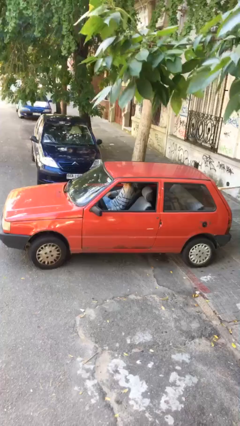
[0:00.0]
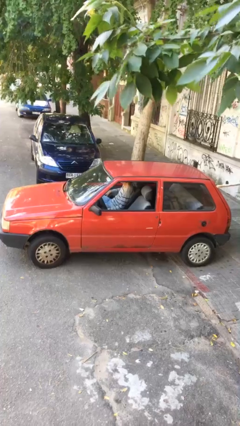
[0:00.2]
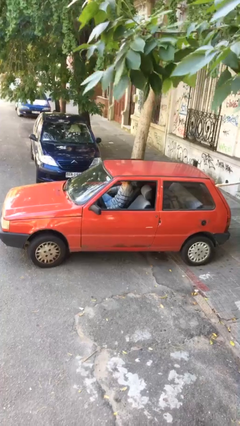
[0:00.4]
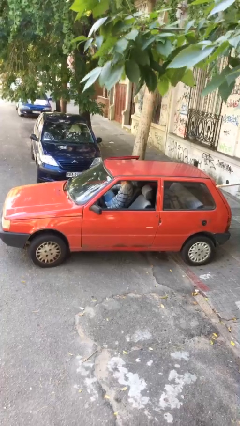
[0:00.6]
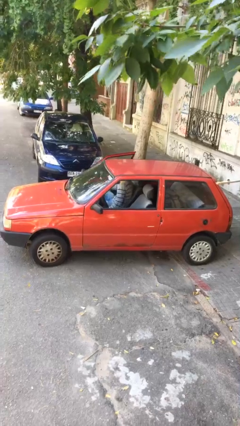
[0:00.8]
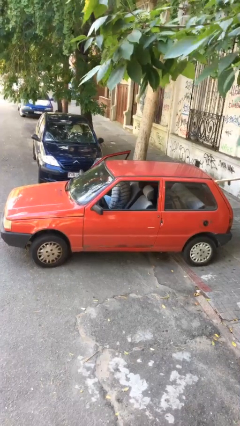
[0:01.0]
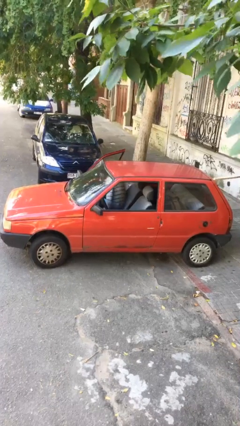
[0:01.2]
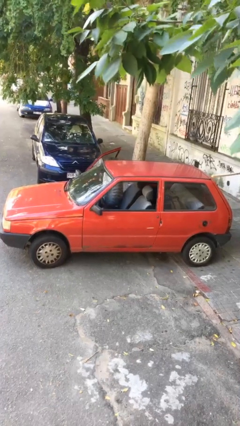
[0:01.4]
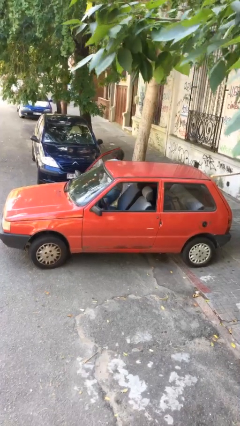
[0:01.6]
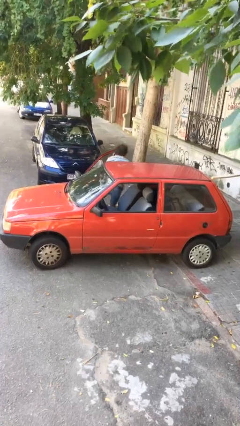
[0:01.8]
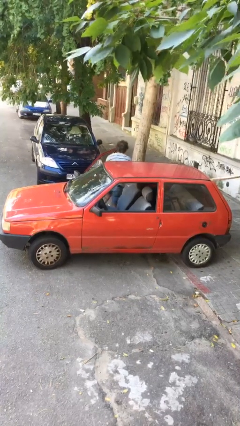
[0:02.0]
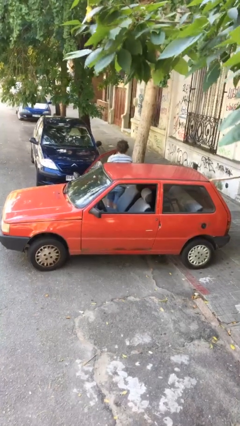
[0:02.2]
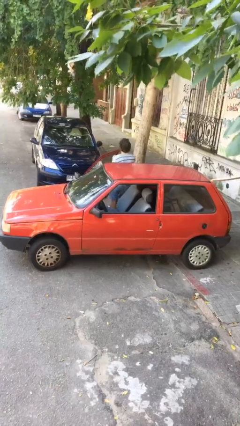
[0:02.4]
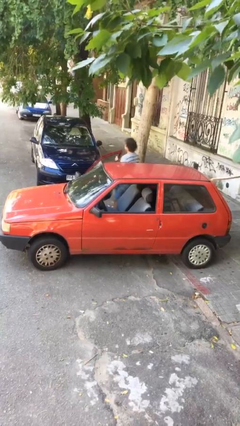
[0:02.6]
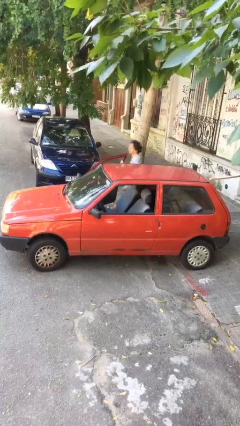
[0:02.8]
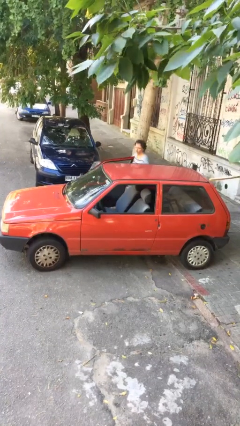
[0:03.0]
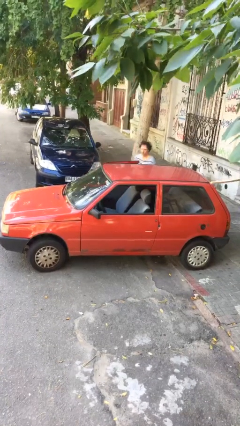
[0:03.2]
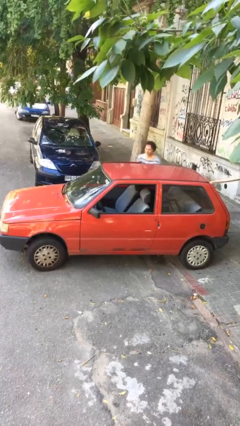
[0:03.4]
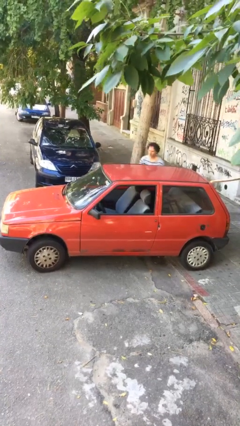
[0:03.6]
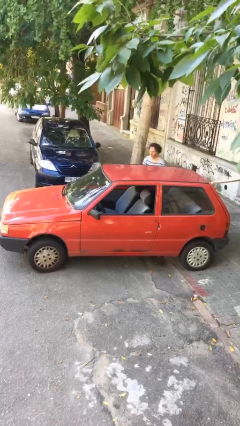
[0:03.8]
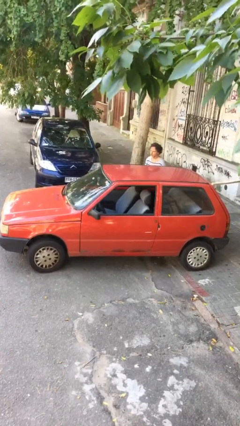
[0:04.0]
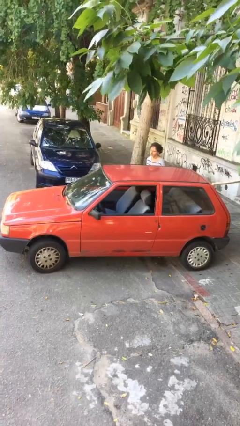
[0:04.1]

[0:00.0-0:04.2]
car drops off person

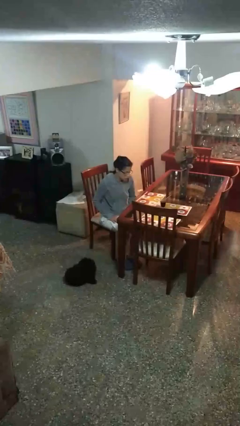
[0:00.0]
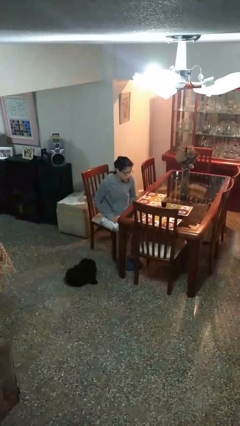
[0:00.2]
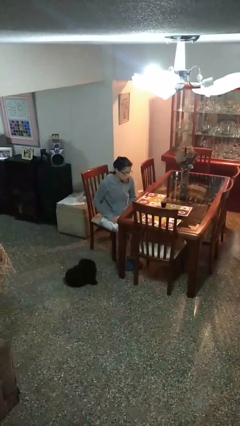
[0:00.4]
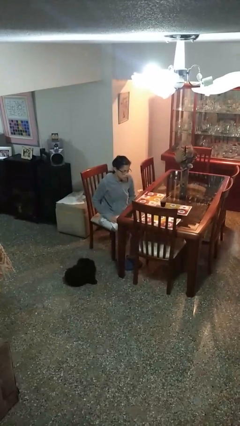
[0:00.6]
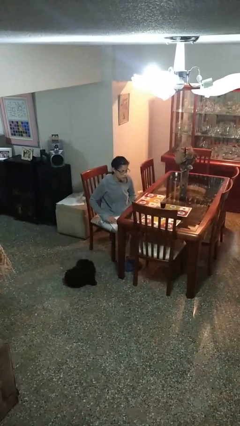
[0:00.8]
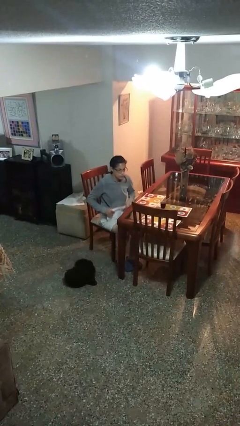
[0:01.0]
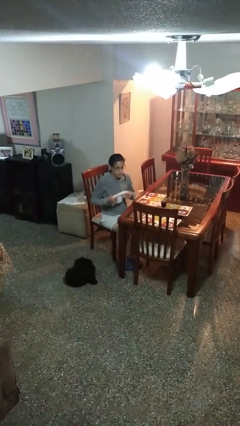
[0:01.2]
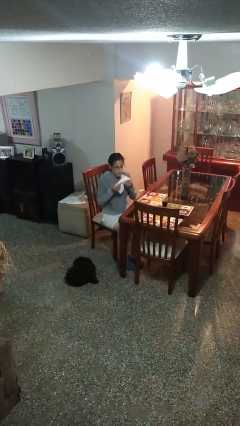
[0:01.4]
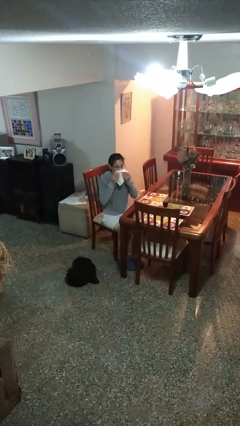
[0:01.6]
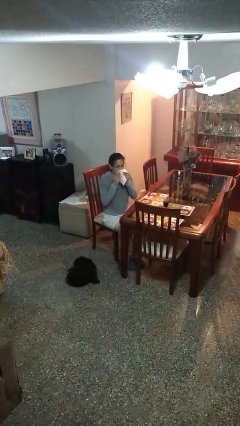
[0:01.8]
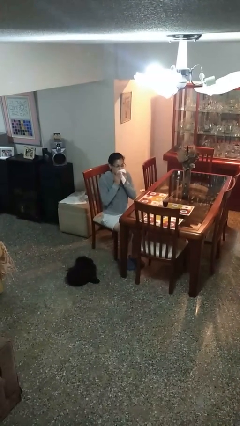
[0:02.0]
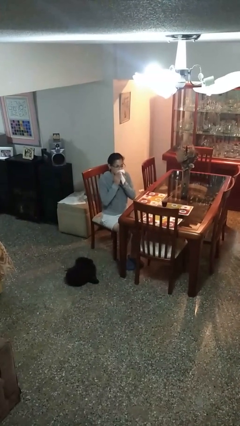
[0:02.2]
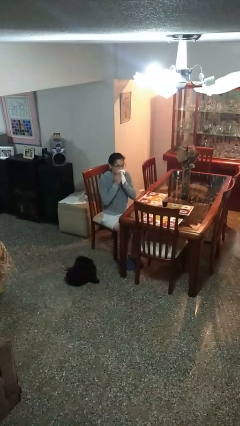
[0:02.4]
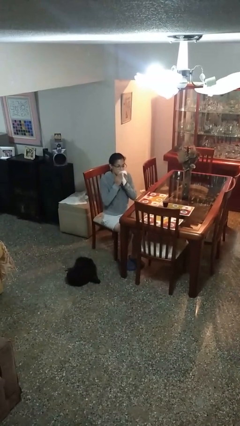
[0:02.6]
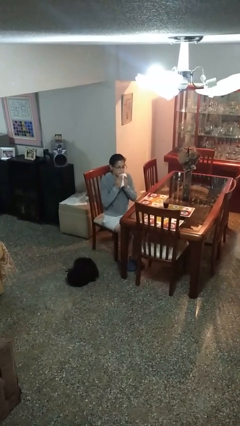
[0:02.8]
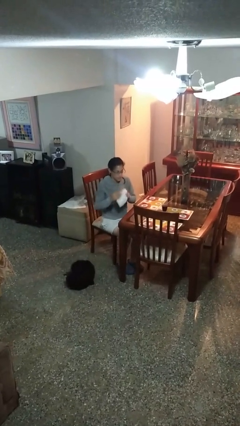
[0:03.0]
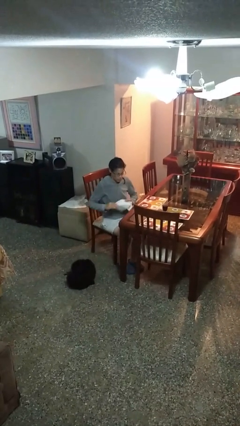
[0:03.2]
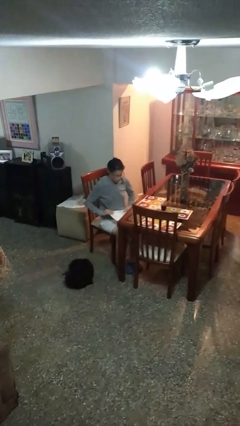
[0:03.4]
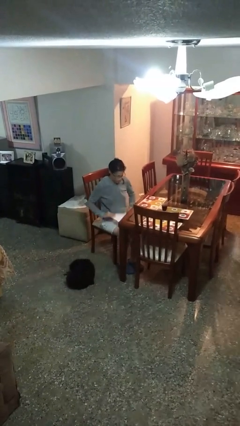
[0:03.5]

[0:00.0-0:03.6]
person wipes mouth with napkin

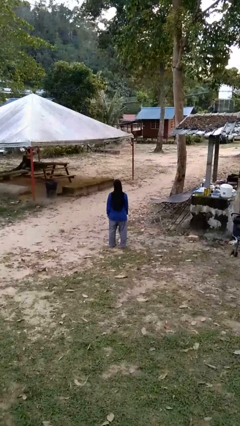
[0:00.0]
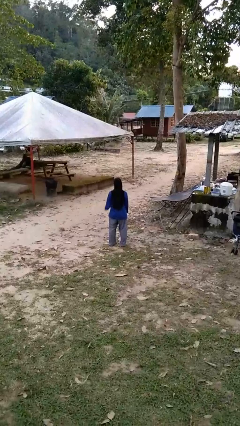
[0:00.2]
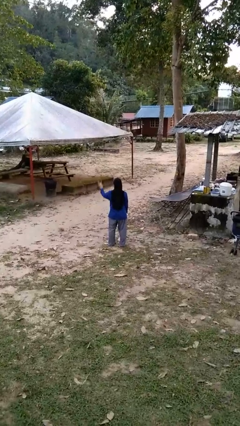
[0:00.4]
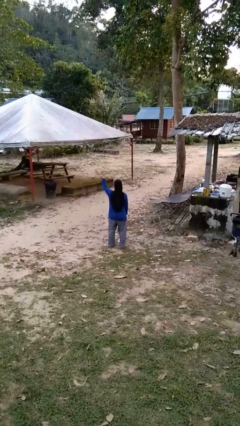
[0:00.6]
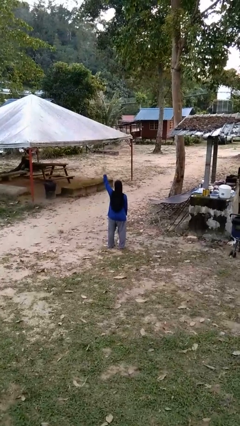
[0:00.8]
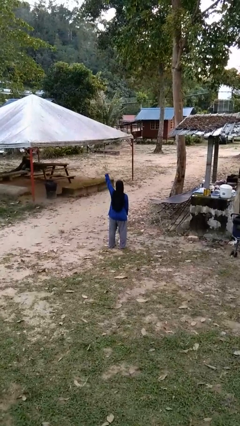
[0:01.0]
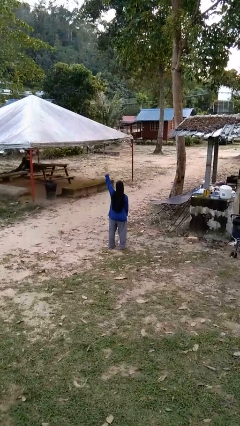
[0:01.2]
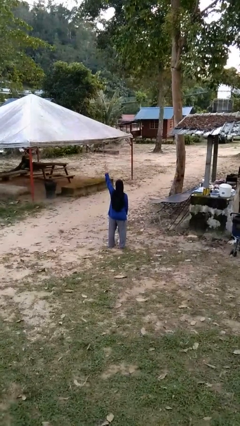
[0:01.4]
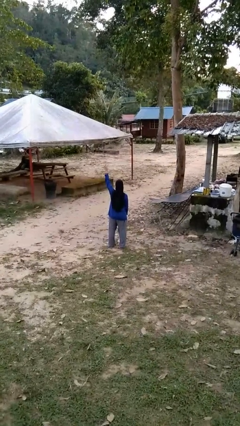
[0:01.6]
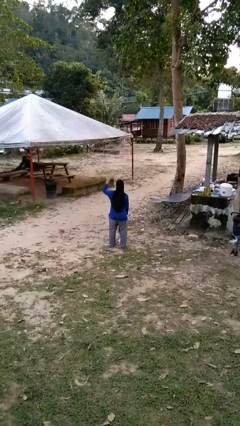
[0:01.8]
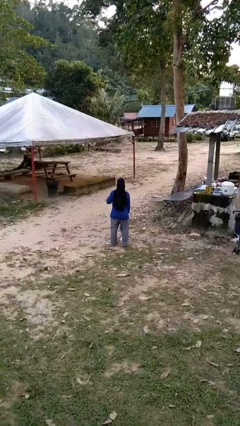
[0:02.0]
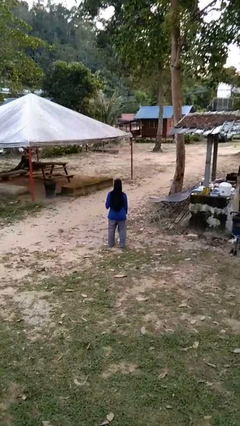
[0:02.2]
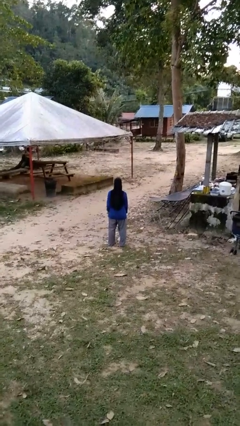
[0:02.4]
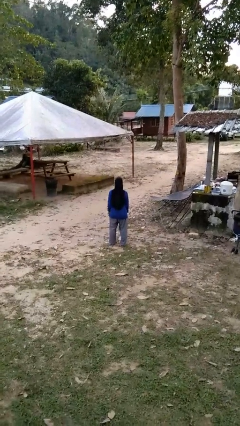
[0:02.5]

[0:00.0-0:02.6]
person gestures number four

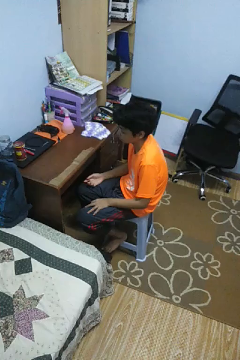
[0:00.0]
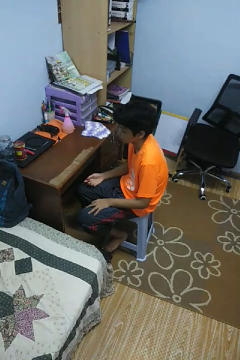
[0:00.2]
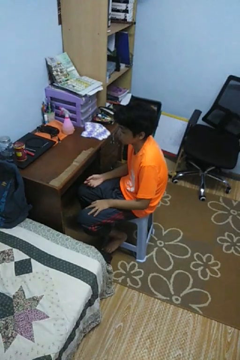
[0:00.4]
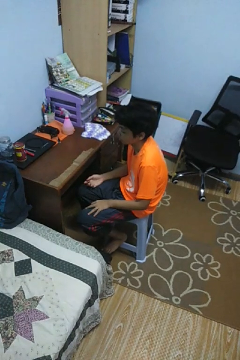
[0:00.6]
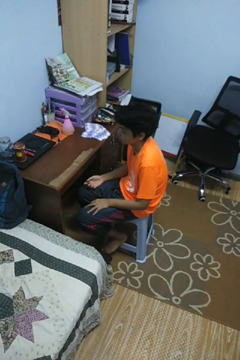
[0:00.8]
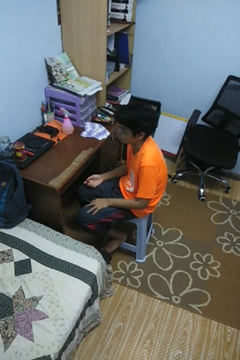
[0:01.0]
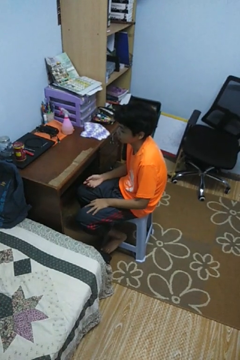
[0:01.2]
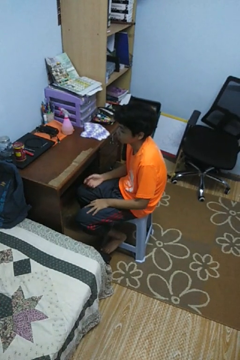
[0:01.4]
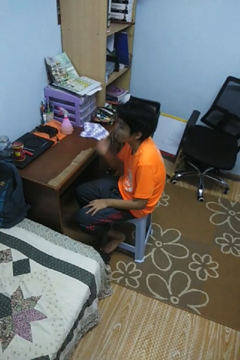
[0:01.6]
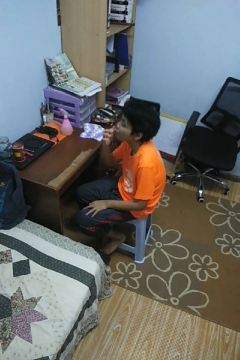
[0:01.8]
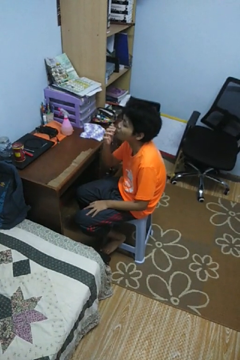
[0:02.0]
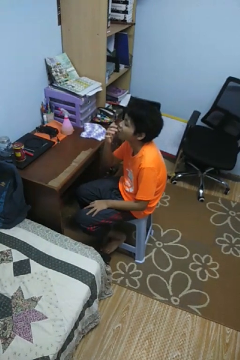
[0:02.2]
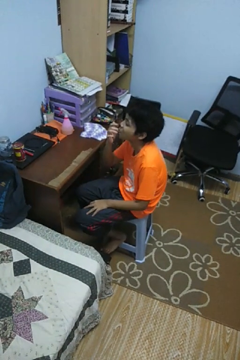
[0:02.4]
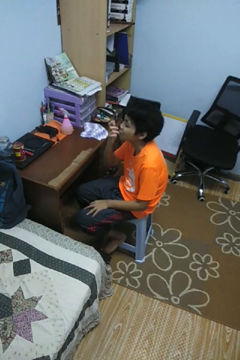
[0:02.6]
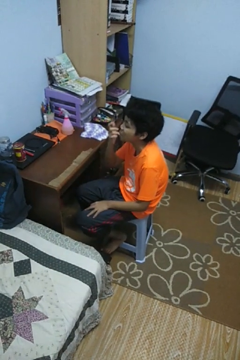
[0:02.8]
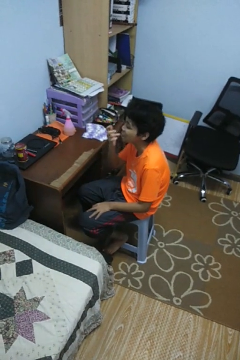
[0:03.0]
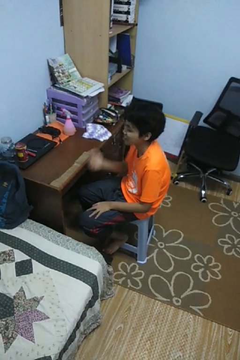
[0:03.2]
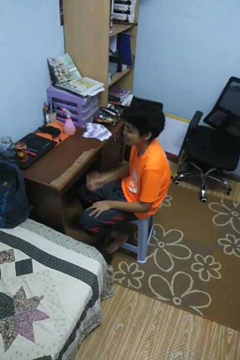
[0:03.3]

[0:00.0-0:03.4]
person licks fingers

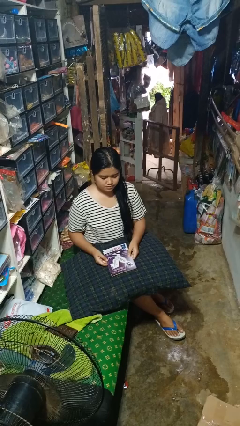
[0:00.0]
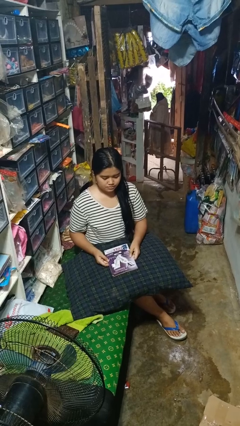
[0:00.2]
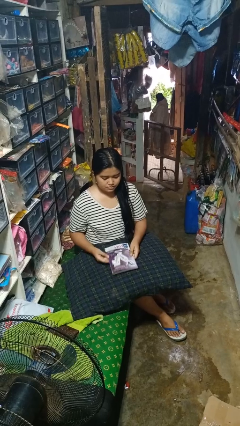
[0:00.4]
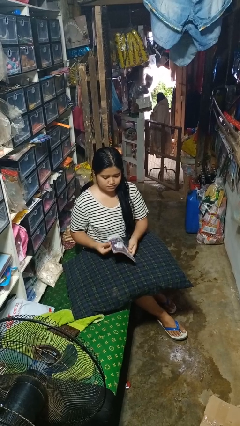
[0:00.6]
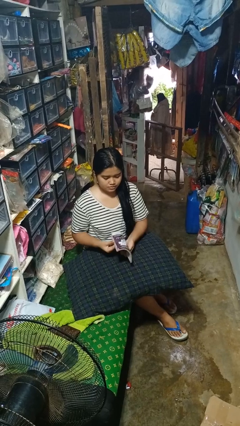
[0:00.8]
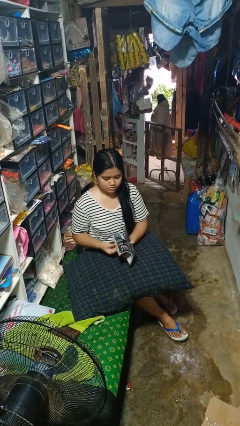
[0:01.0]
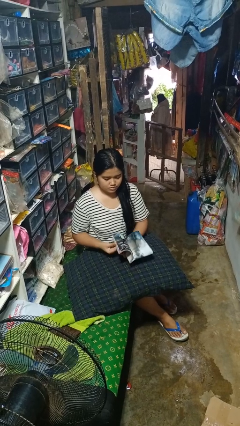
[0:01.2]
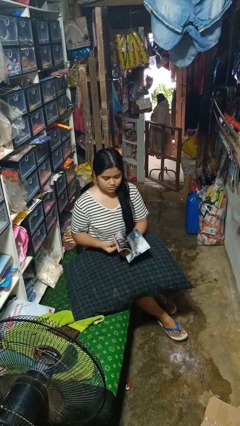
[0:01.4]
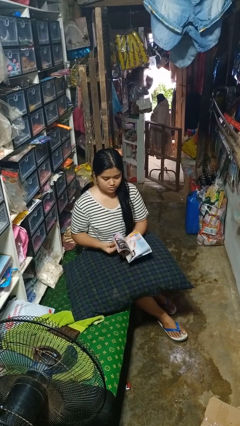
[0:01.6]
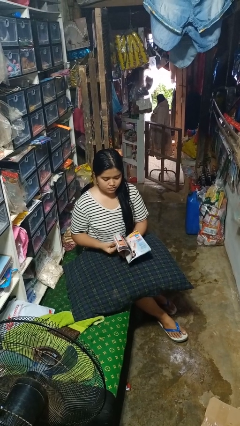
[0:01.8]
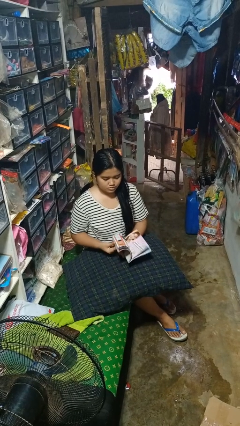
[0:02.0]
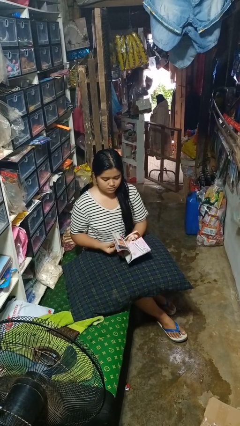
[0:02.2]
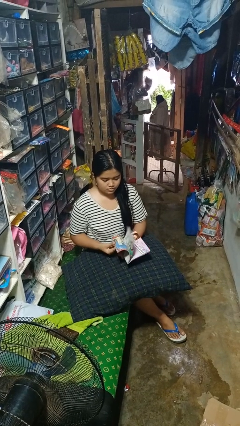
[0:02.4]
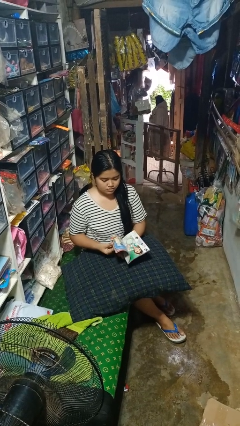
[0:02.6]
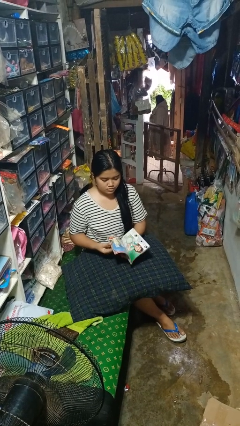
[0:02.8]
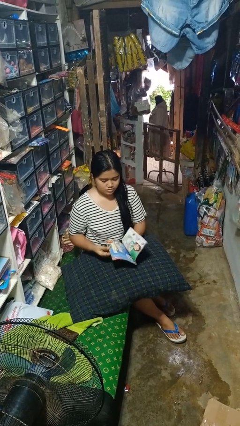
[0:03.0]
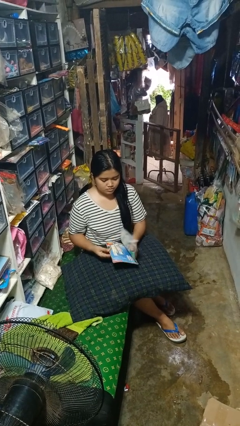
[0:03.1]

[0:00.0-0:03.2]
person reads magazine

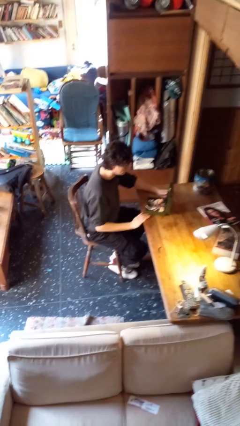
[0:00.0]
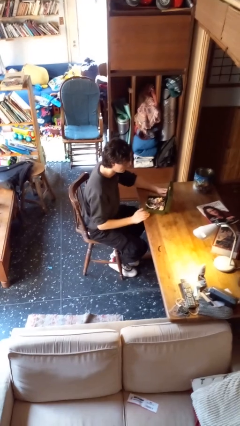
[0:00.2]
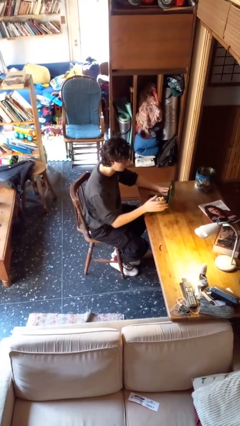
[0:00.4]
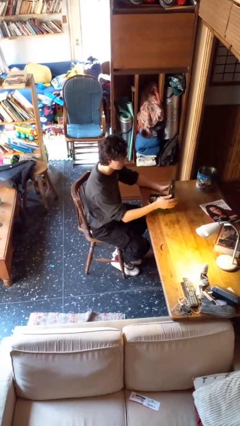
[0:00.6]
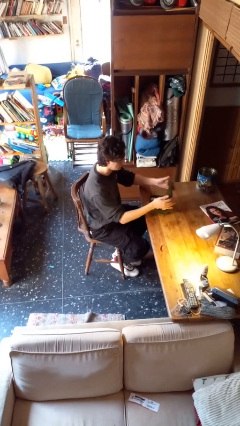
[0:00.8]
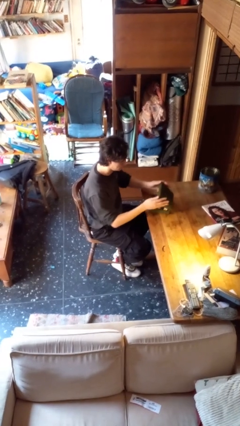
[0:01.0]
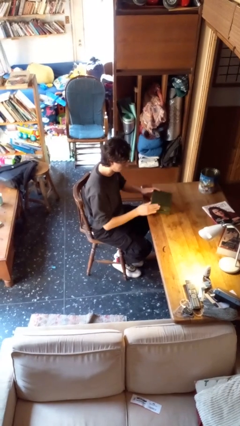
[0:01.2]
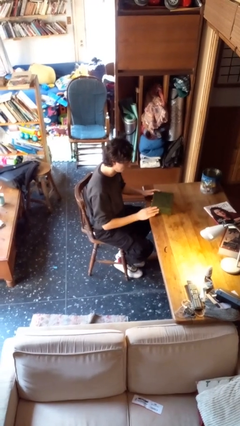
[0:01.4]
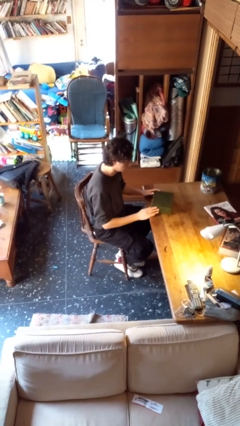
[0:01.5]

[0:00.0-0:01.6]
person closes jewelry box
